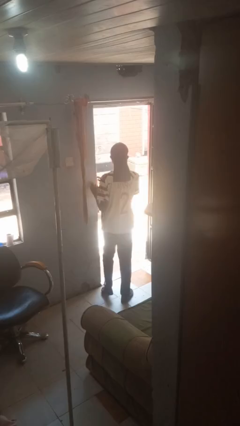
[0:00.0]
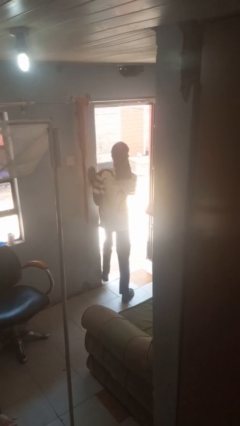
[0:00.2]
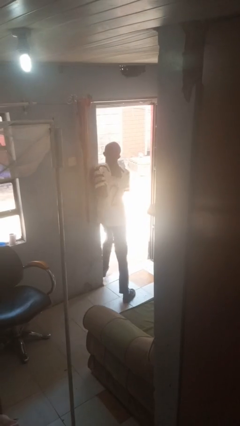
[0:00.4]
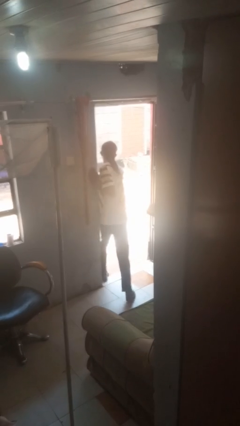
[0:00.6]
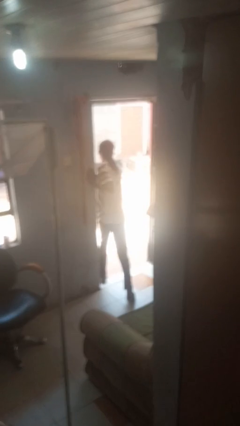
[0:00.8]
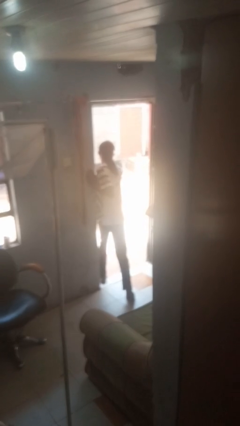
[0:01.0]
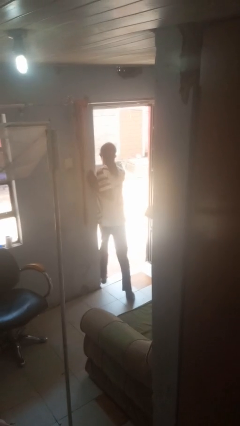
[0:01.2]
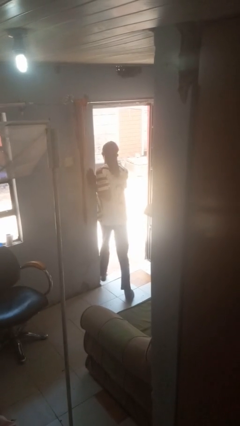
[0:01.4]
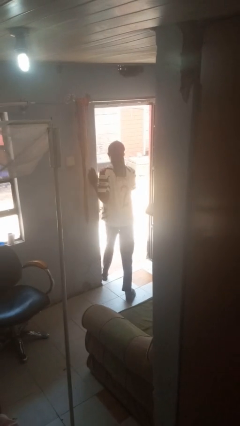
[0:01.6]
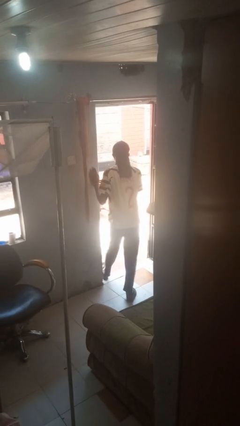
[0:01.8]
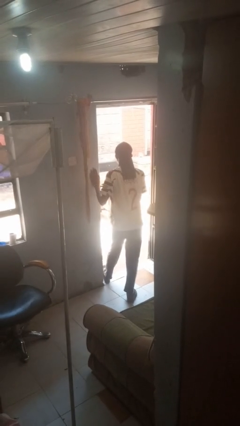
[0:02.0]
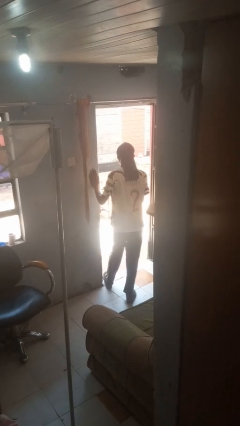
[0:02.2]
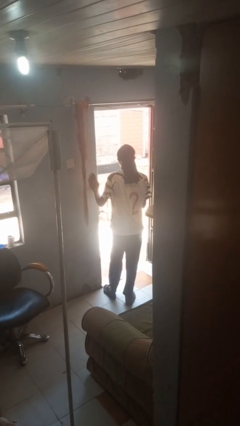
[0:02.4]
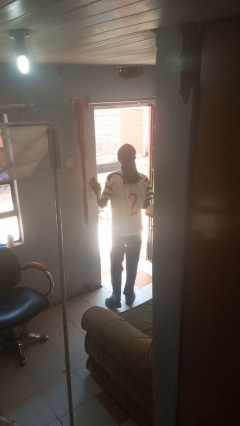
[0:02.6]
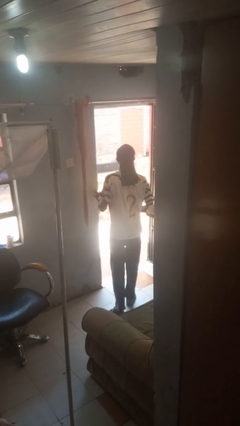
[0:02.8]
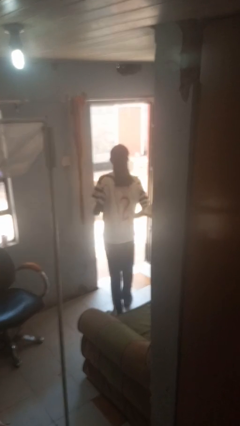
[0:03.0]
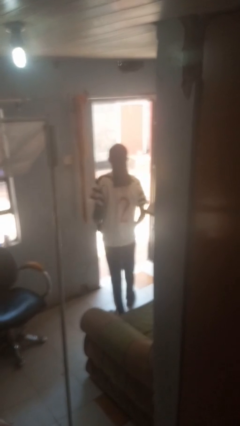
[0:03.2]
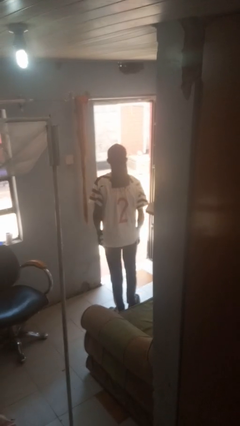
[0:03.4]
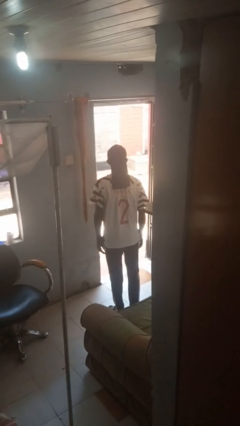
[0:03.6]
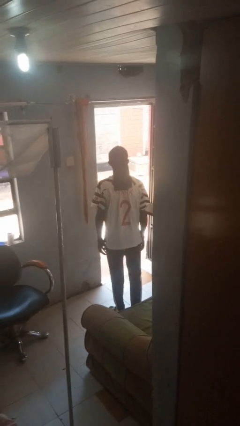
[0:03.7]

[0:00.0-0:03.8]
person bumps into wall

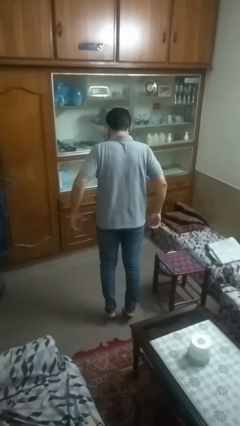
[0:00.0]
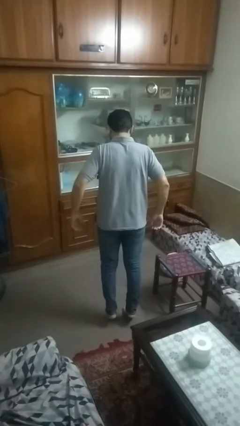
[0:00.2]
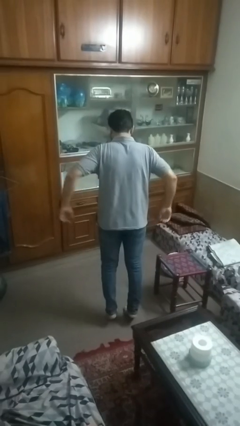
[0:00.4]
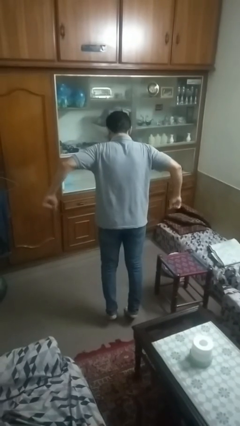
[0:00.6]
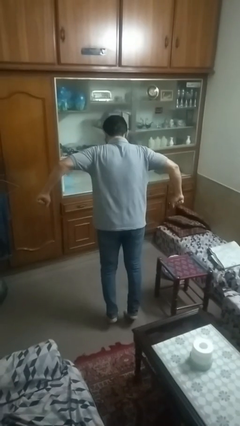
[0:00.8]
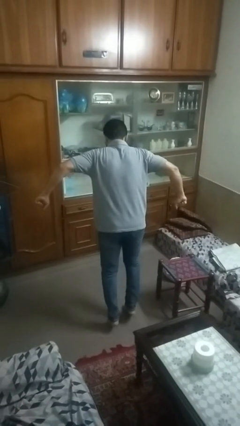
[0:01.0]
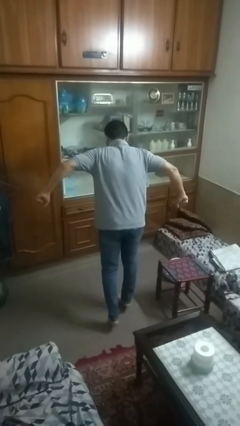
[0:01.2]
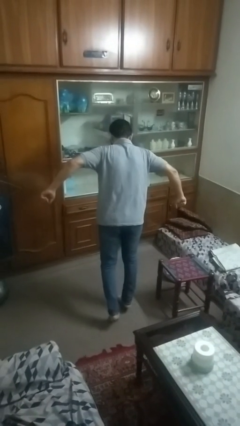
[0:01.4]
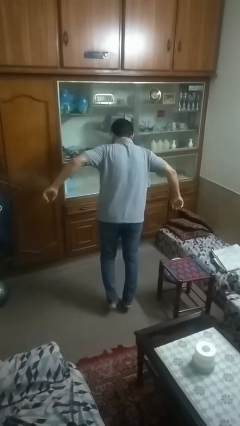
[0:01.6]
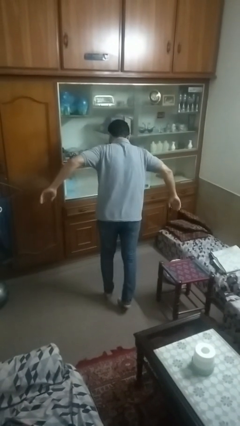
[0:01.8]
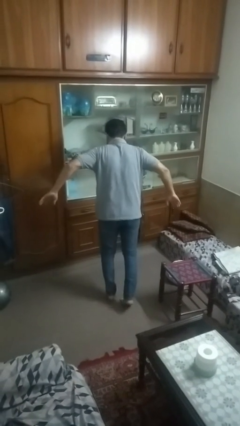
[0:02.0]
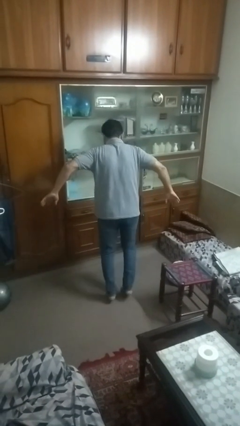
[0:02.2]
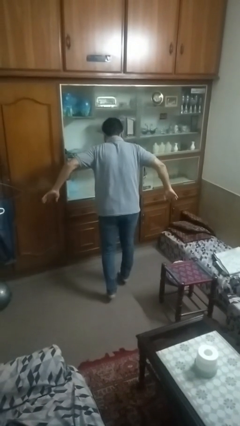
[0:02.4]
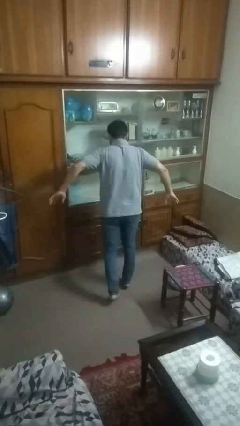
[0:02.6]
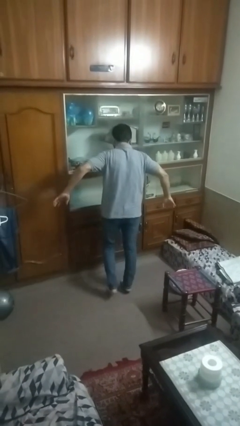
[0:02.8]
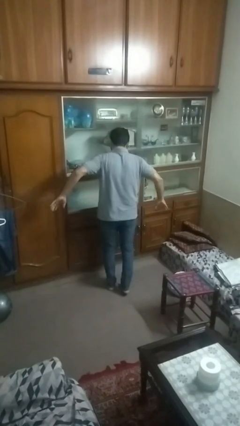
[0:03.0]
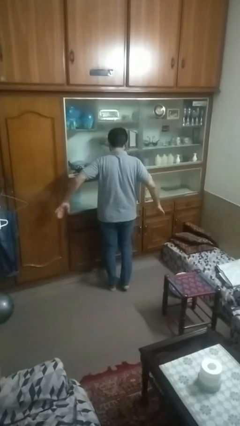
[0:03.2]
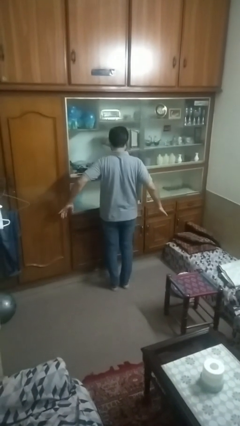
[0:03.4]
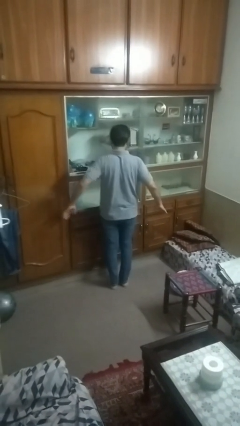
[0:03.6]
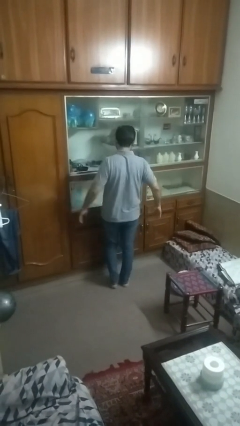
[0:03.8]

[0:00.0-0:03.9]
person walks tiptoe

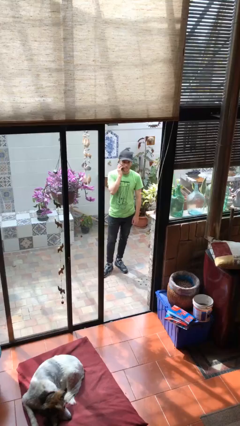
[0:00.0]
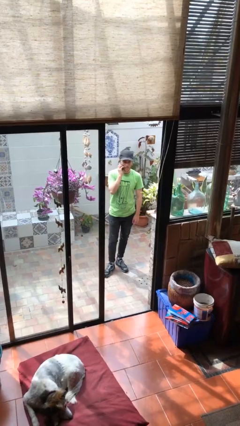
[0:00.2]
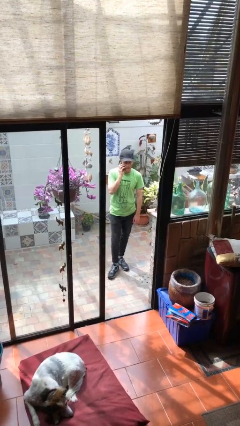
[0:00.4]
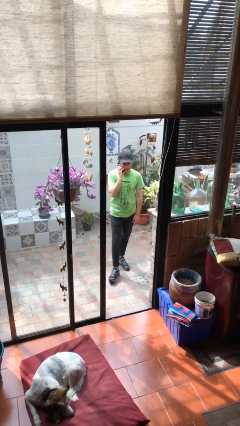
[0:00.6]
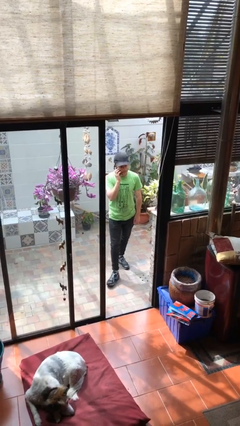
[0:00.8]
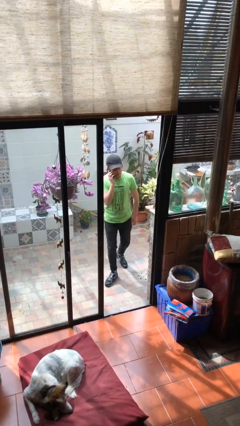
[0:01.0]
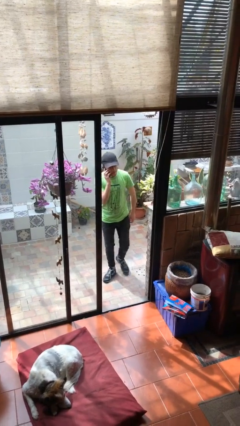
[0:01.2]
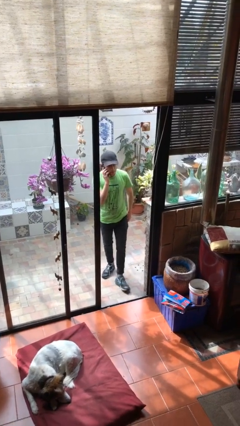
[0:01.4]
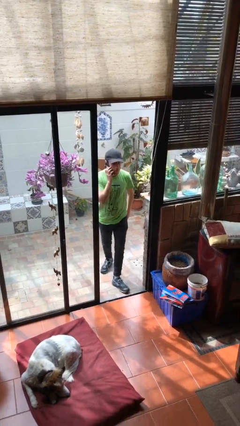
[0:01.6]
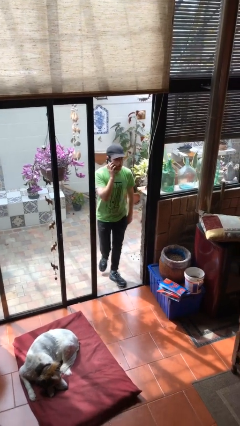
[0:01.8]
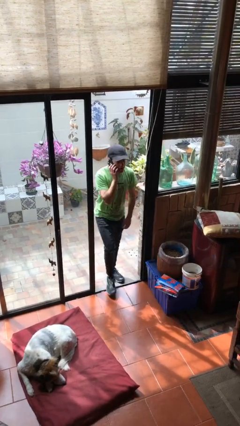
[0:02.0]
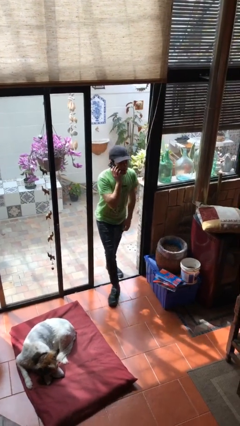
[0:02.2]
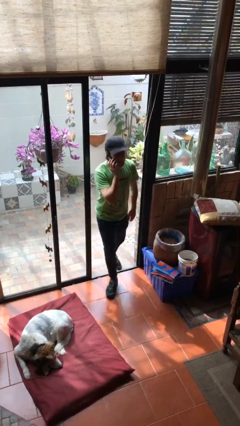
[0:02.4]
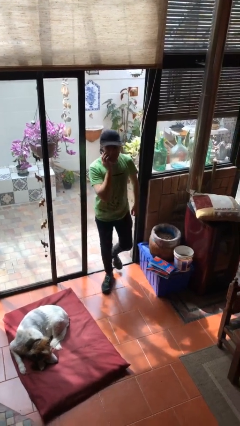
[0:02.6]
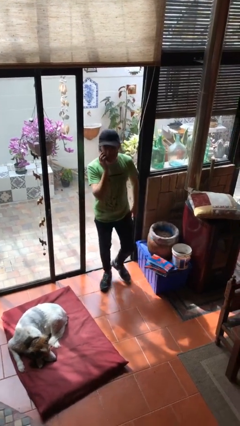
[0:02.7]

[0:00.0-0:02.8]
person enters scene through structure

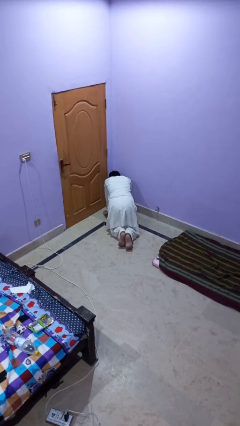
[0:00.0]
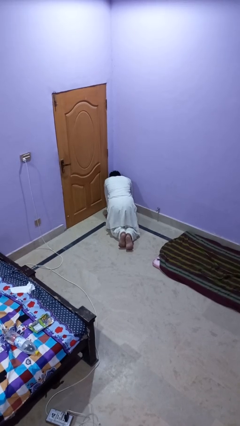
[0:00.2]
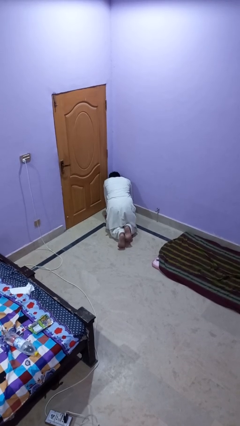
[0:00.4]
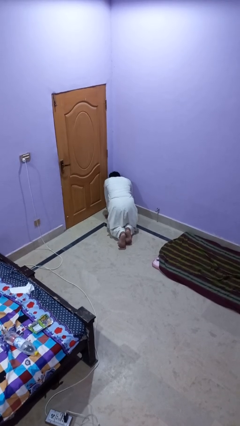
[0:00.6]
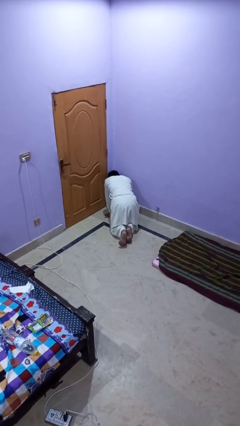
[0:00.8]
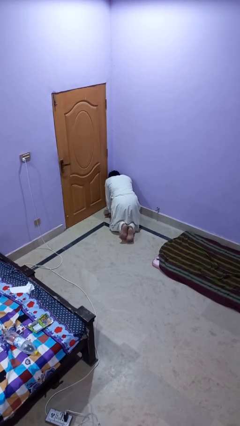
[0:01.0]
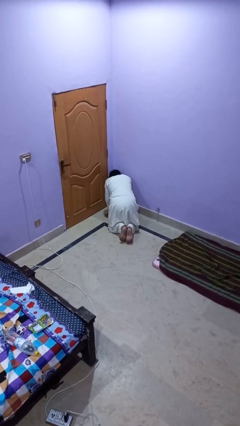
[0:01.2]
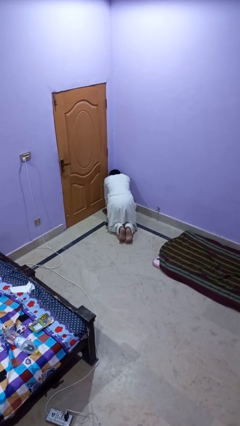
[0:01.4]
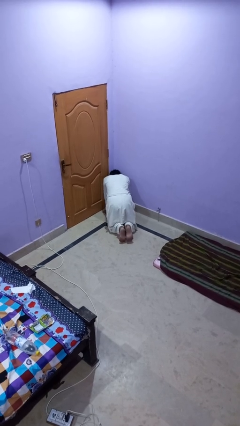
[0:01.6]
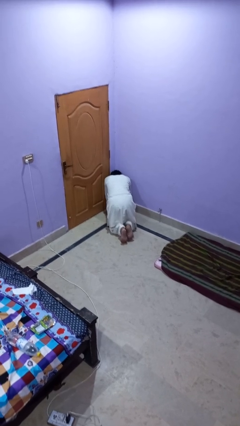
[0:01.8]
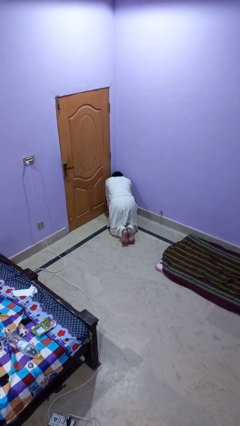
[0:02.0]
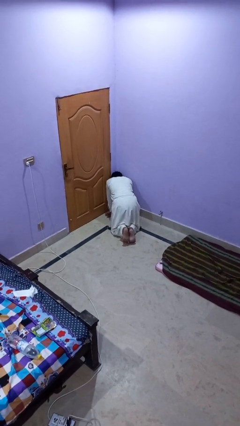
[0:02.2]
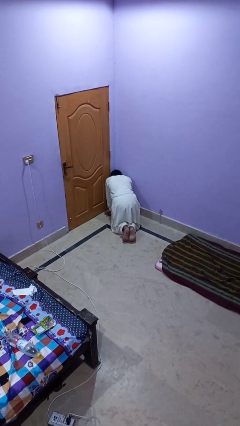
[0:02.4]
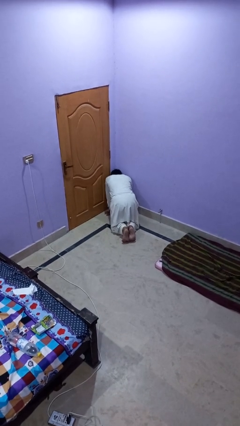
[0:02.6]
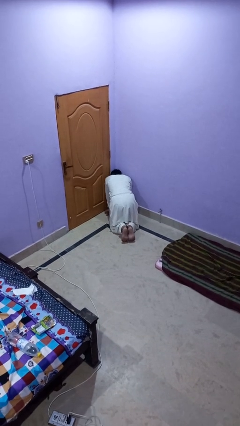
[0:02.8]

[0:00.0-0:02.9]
person crawls

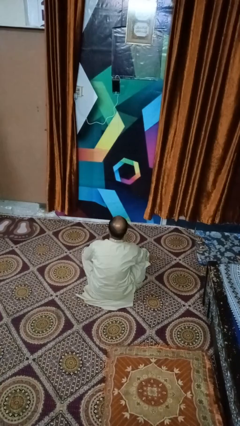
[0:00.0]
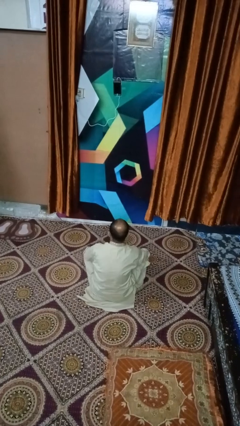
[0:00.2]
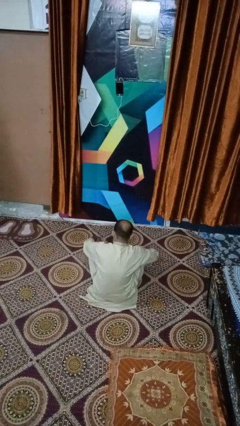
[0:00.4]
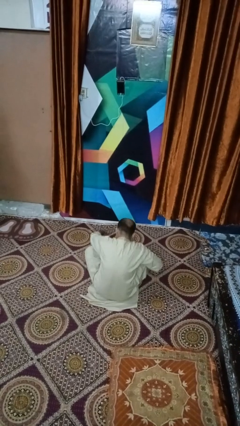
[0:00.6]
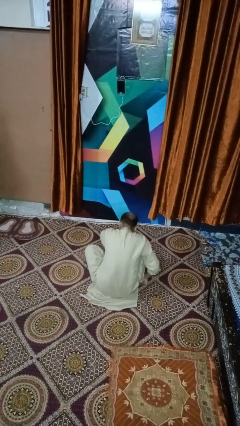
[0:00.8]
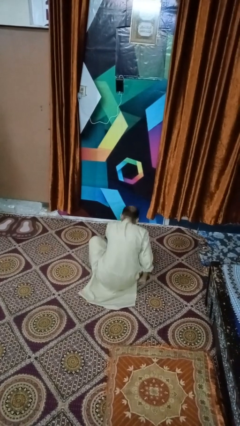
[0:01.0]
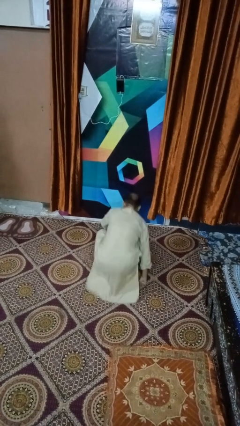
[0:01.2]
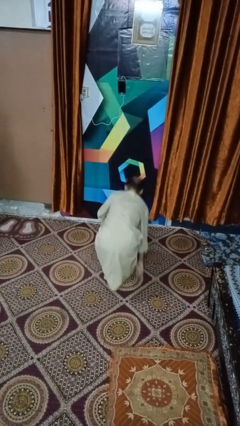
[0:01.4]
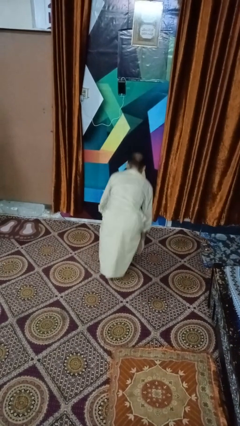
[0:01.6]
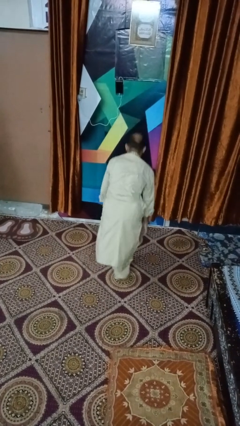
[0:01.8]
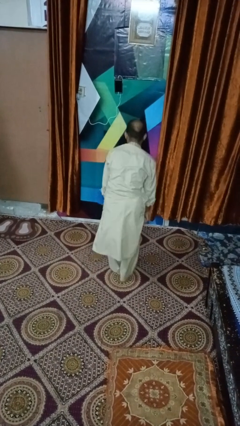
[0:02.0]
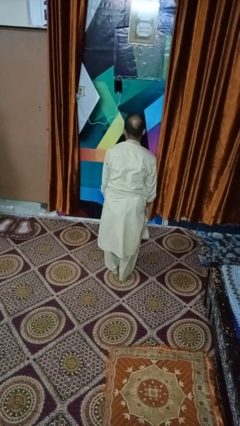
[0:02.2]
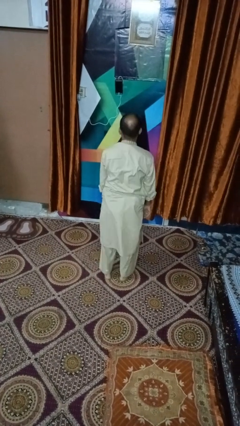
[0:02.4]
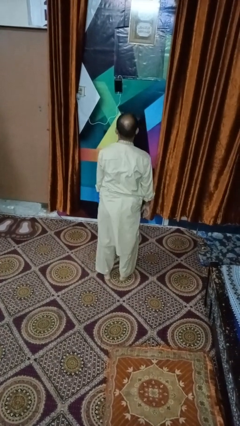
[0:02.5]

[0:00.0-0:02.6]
person stands up from floor

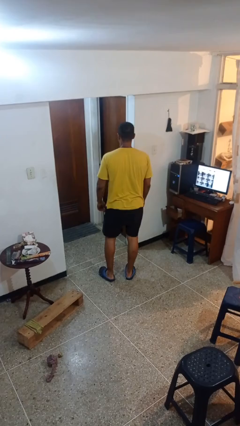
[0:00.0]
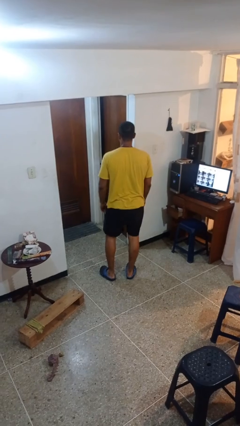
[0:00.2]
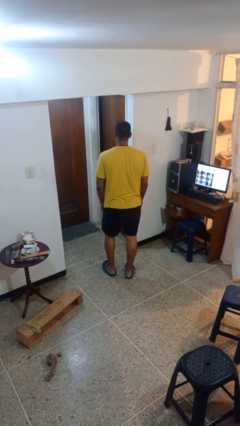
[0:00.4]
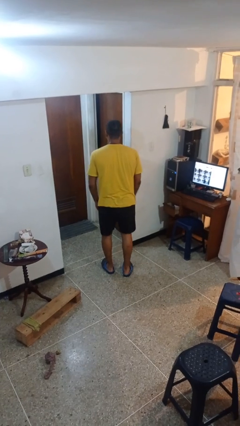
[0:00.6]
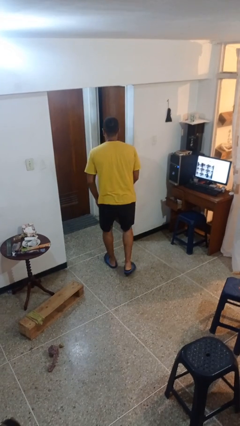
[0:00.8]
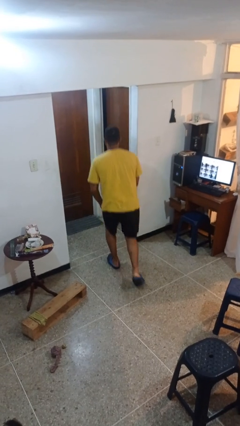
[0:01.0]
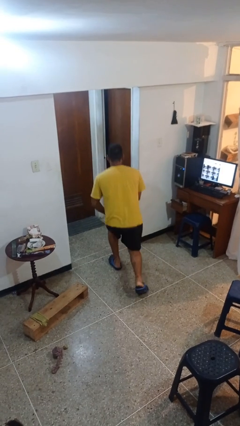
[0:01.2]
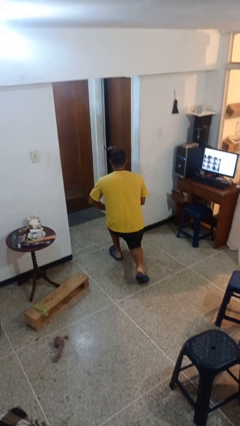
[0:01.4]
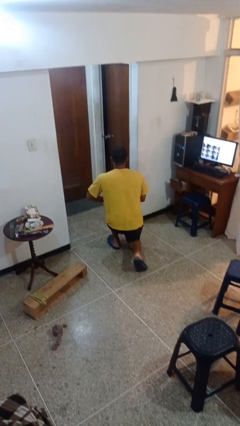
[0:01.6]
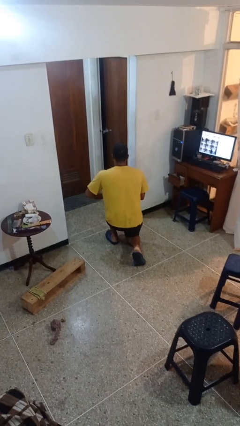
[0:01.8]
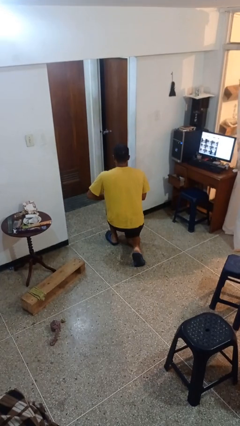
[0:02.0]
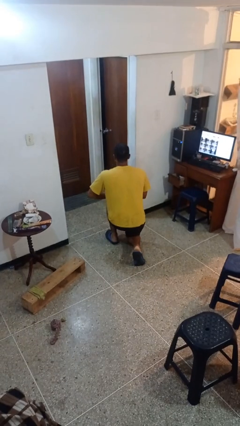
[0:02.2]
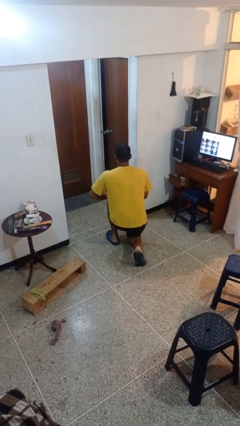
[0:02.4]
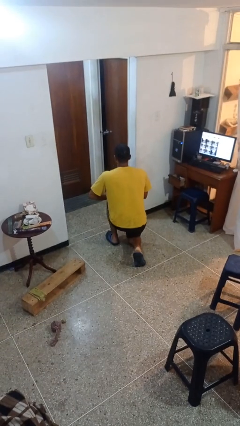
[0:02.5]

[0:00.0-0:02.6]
person kneels
